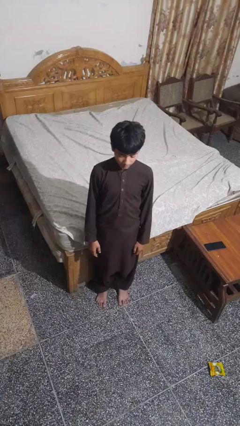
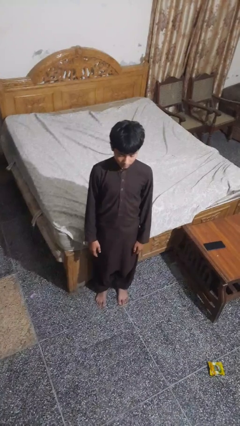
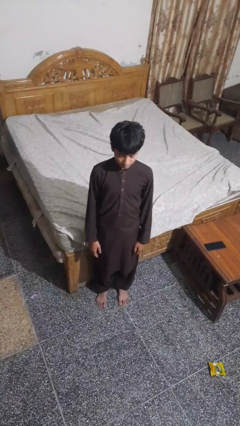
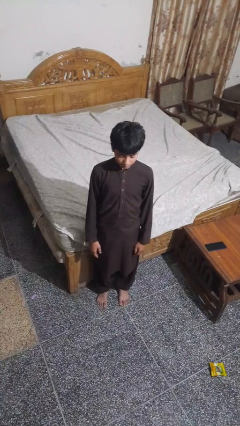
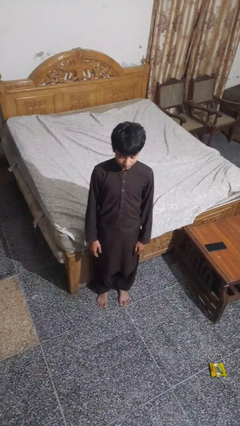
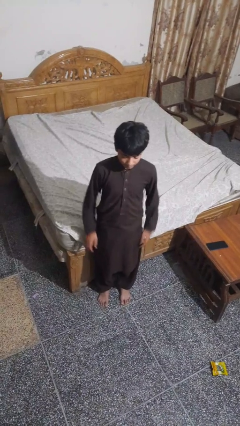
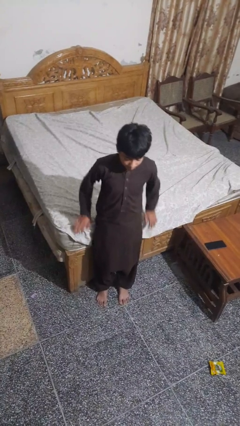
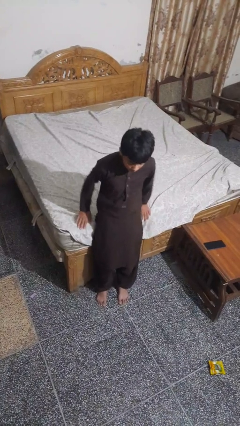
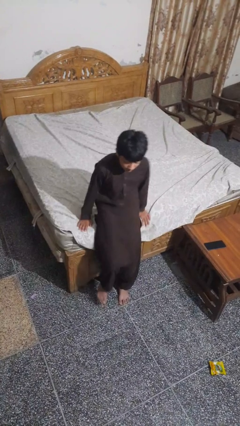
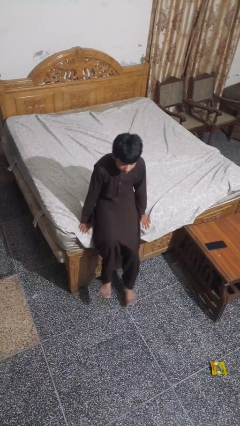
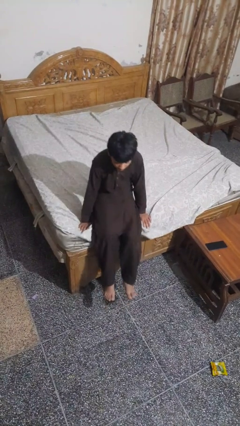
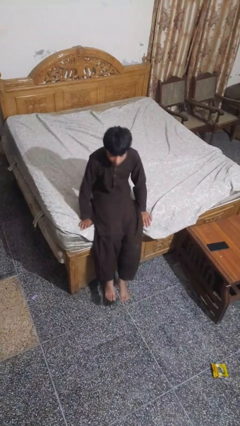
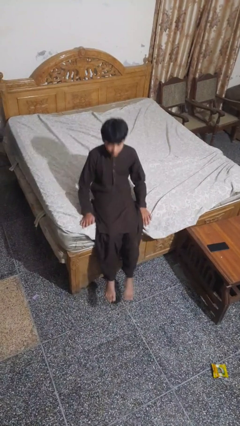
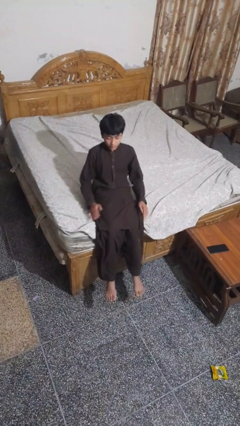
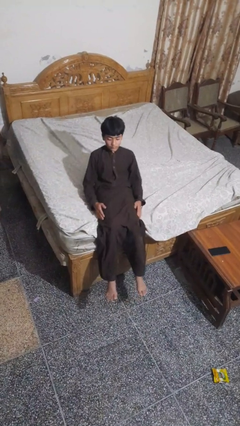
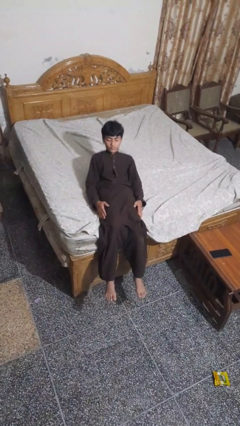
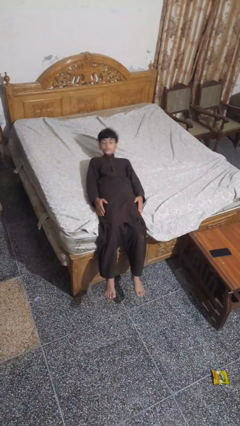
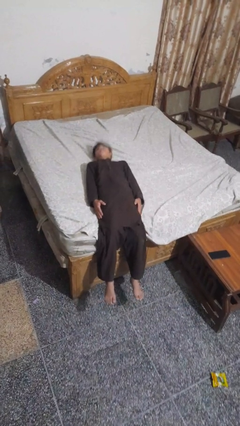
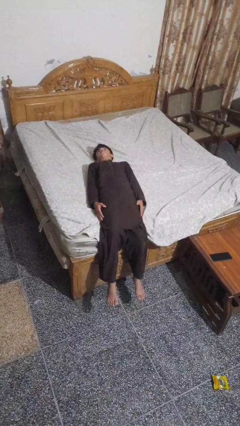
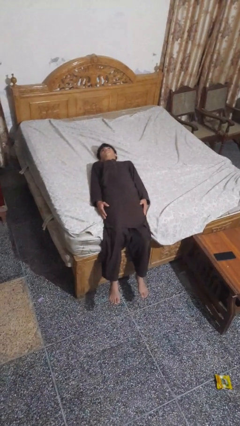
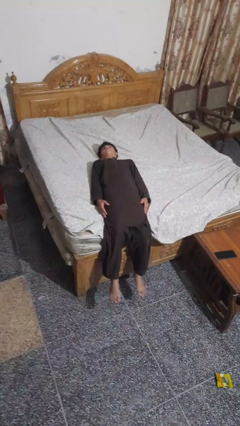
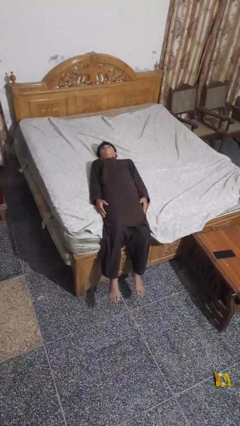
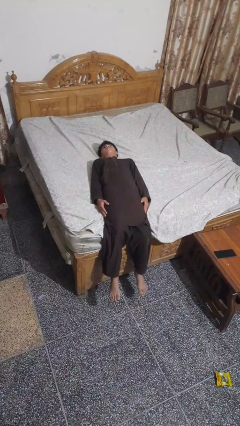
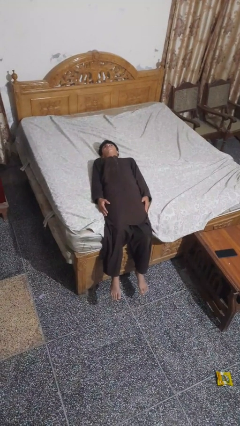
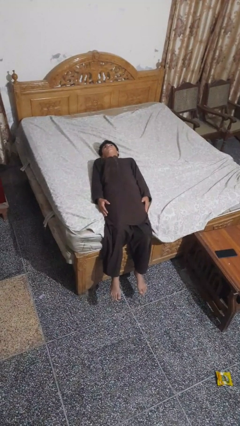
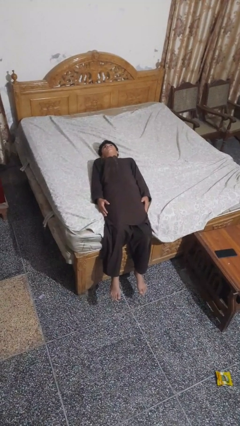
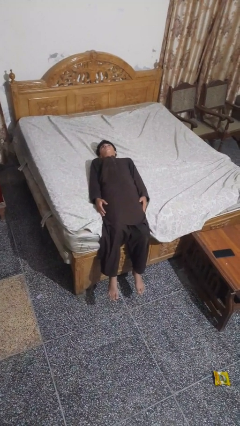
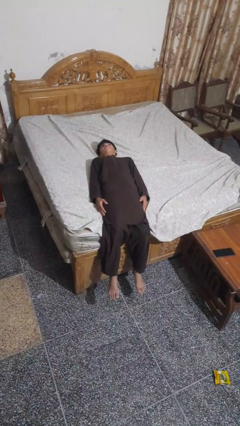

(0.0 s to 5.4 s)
person lies down on bed

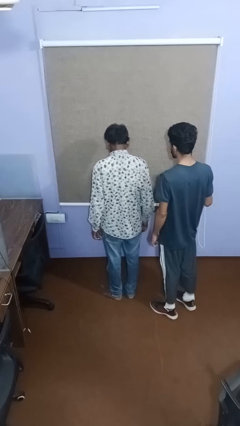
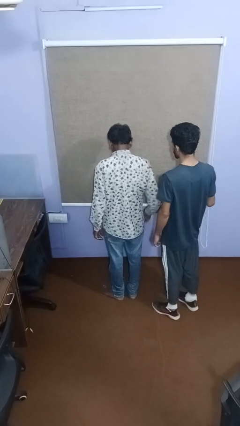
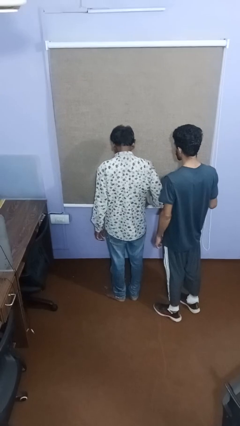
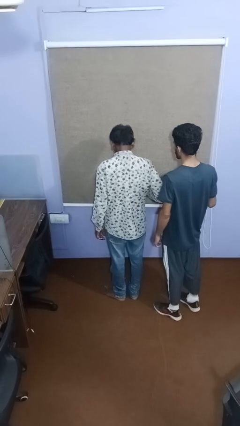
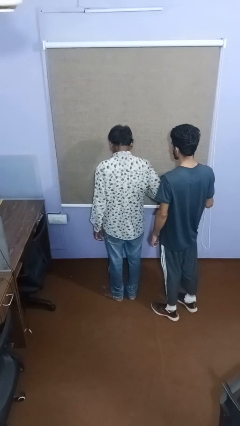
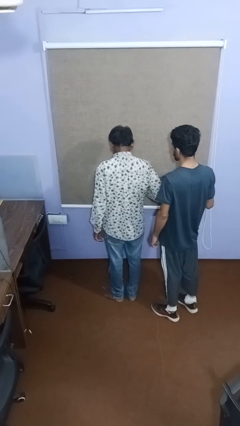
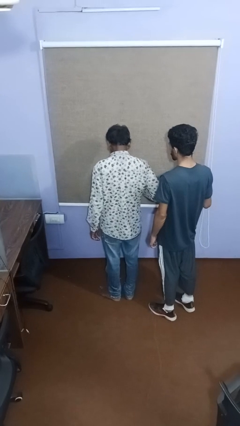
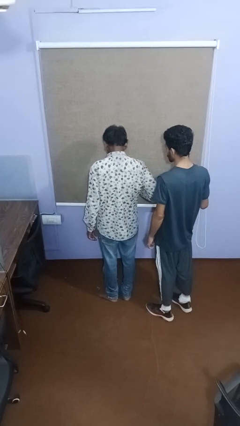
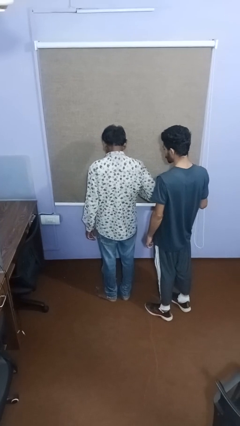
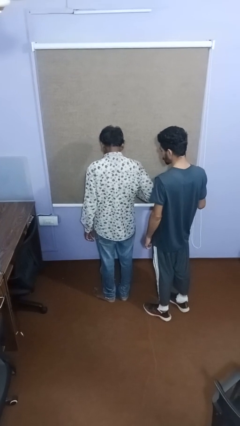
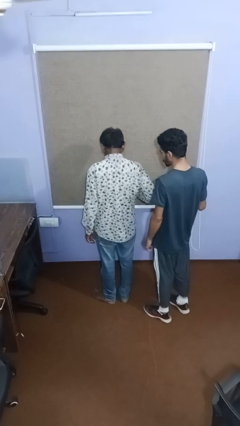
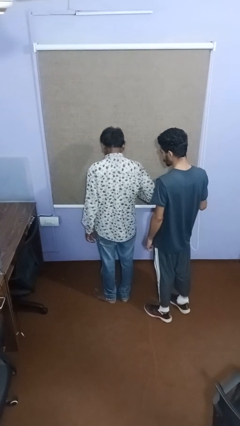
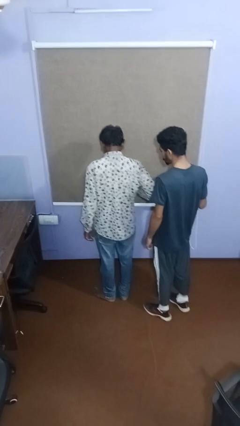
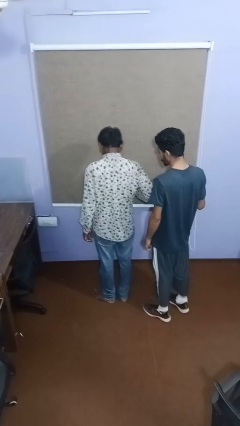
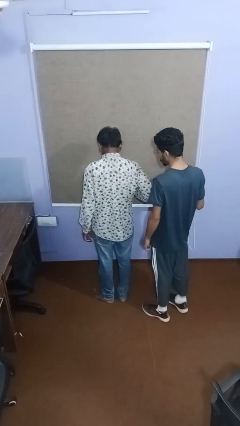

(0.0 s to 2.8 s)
person nudges person with elbow

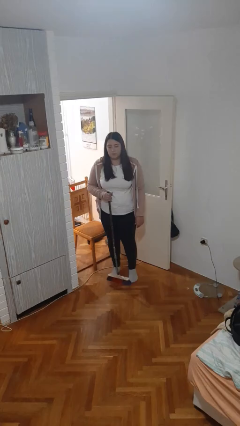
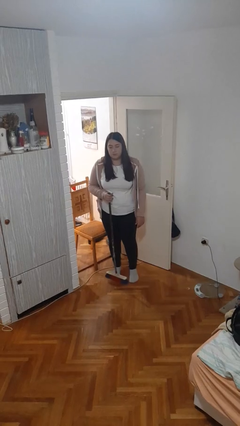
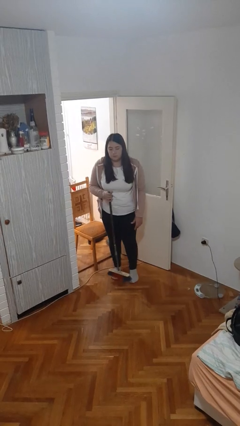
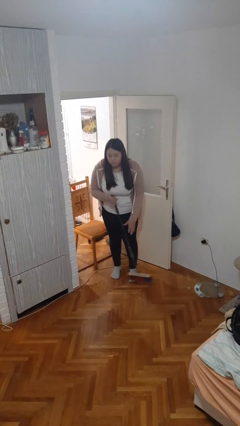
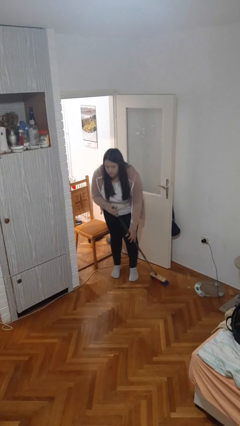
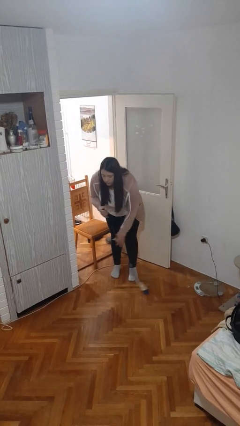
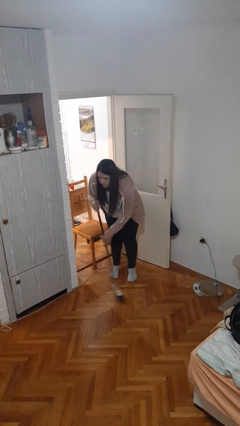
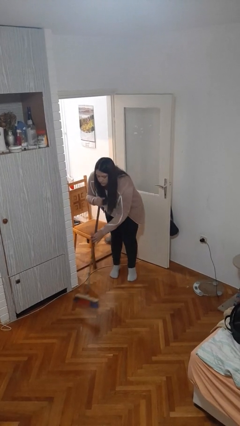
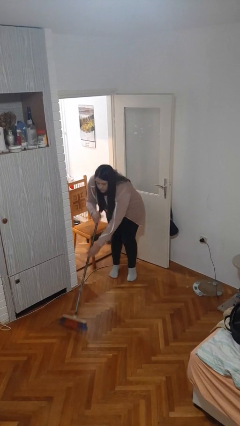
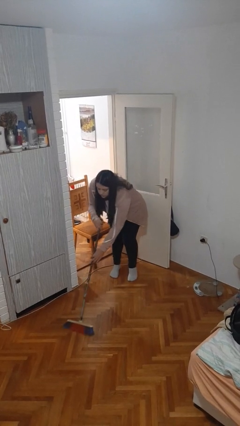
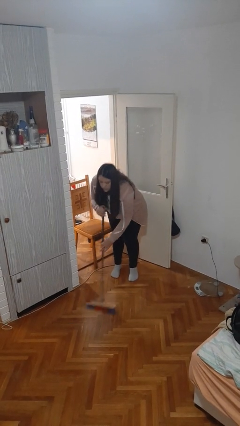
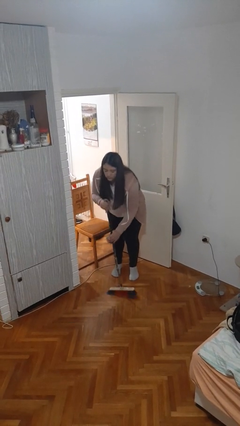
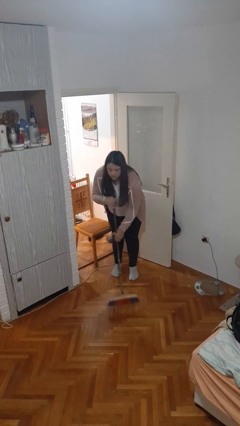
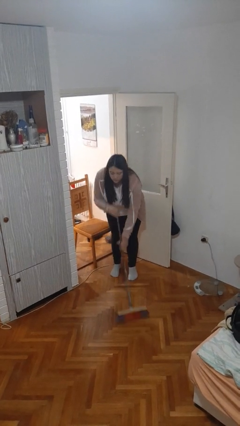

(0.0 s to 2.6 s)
person sweeps floor

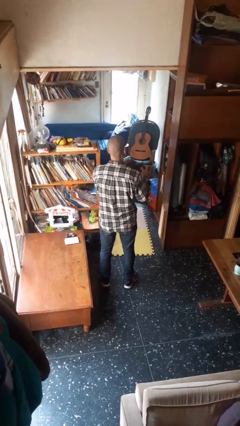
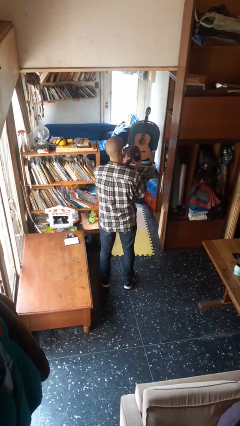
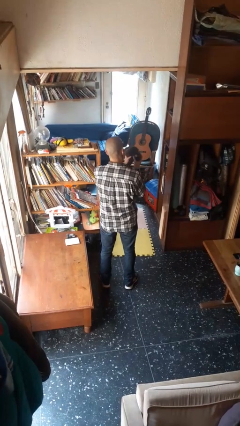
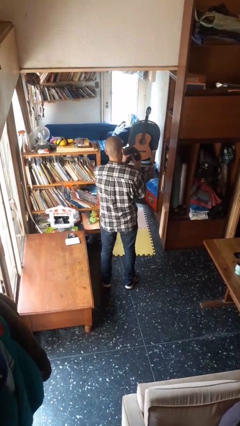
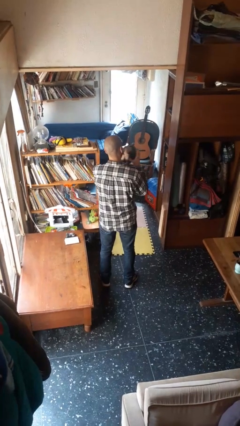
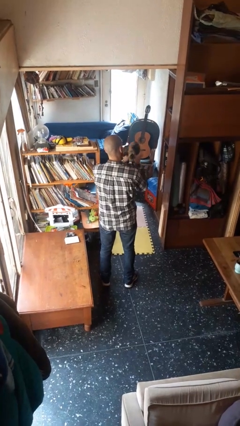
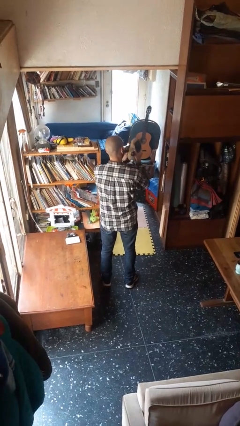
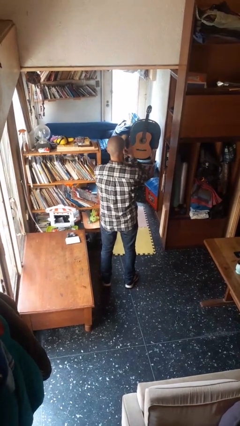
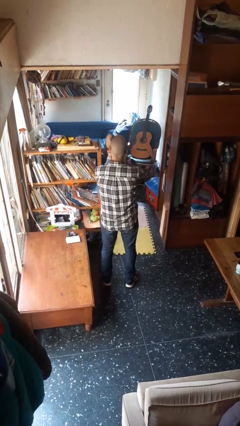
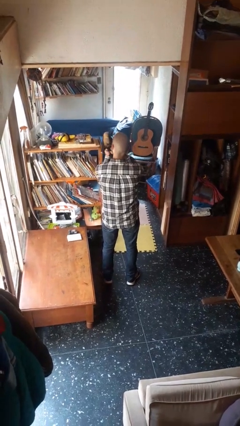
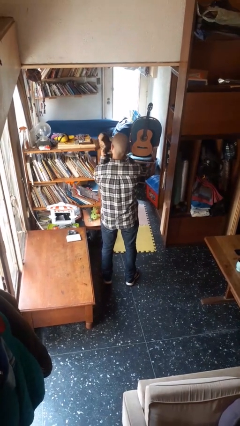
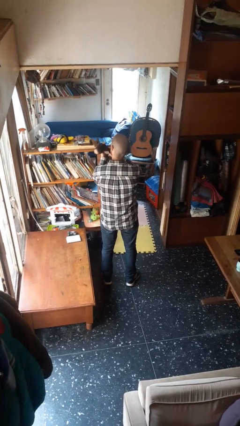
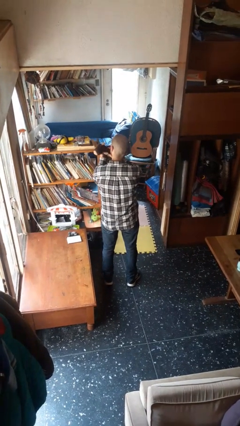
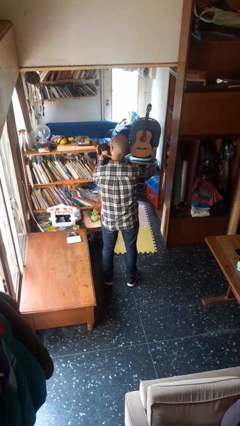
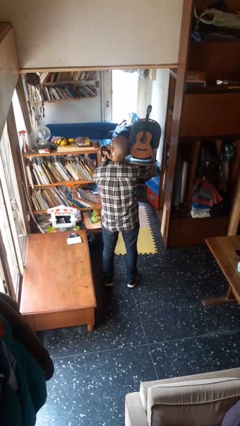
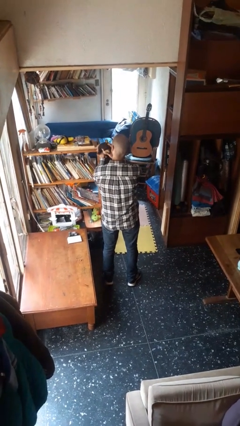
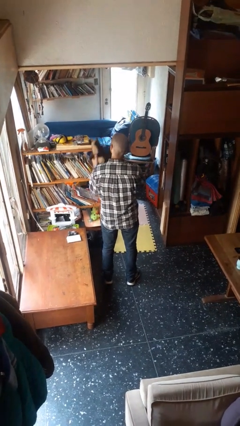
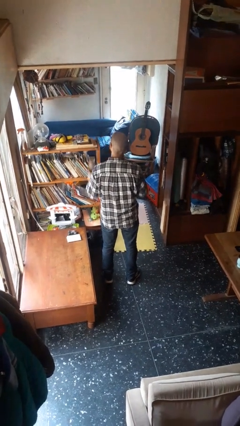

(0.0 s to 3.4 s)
person squeezes object

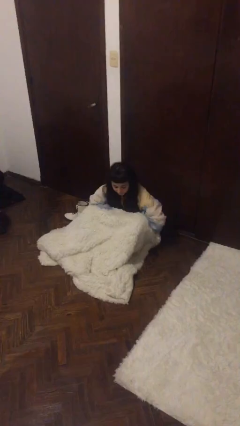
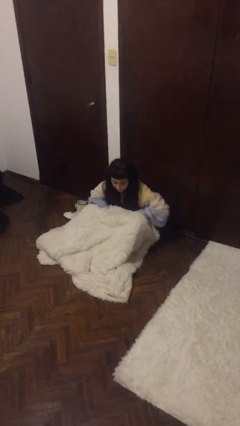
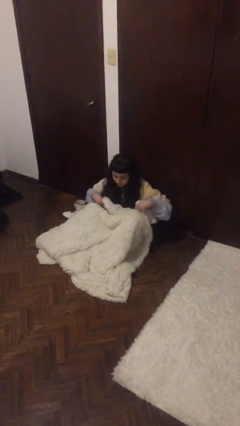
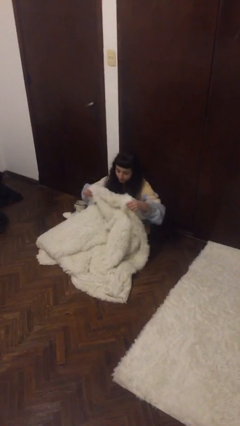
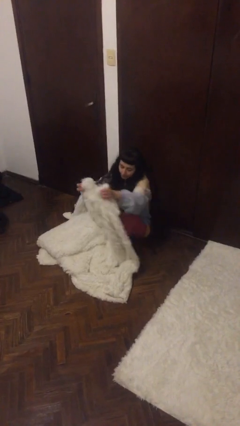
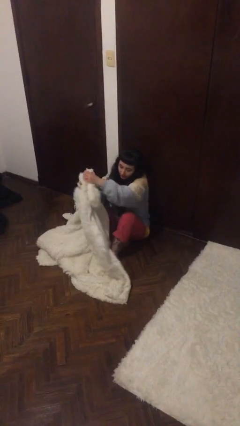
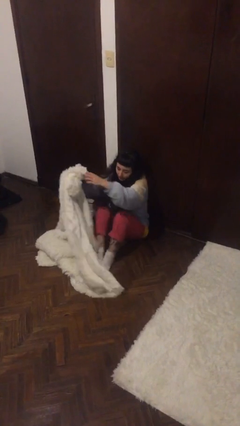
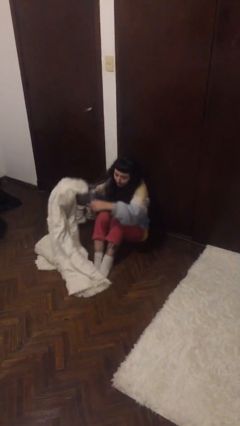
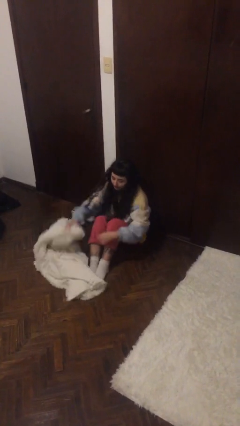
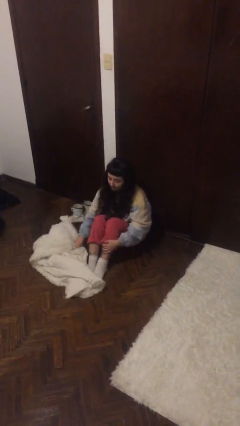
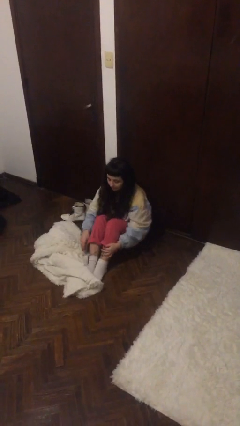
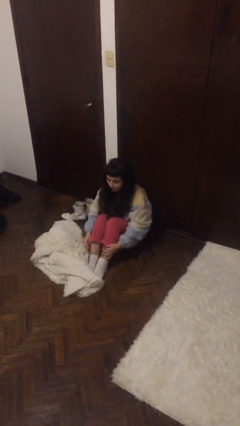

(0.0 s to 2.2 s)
person uncovers with blanket

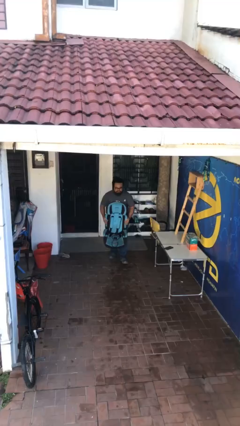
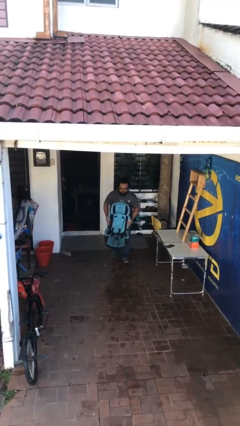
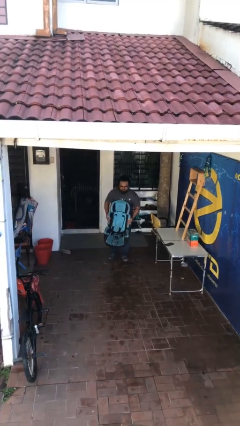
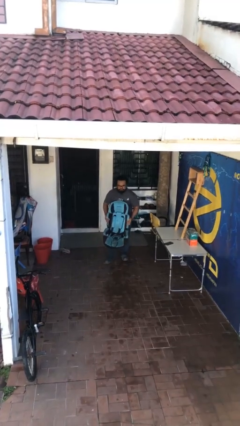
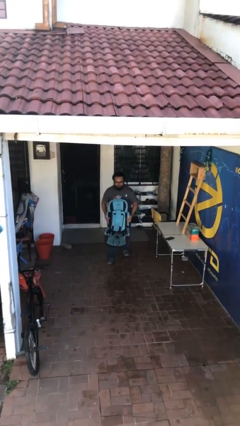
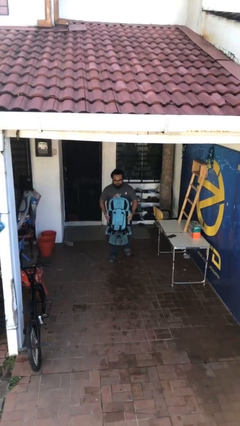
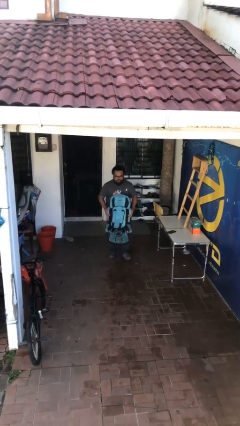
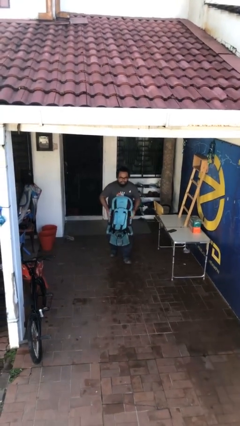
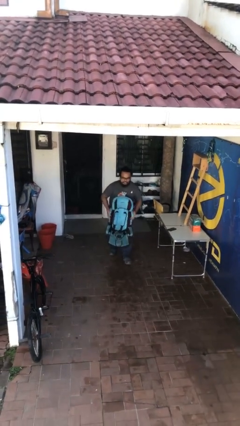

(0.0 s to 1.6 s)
person carries heavy object
